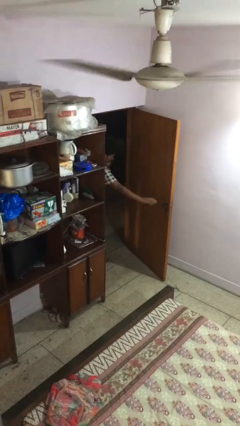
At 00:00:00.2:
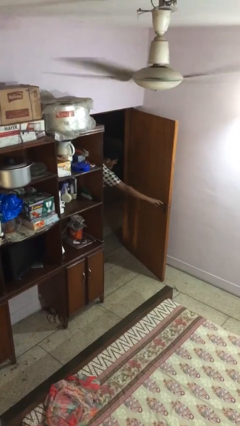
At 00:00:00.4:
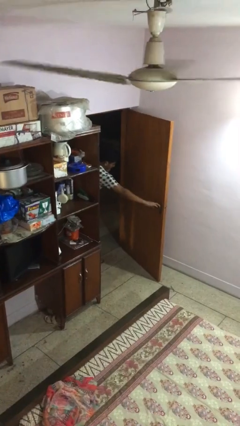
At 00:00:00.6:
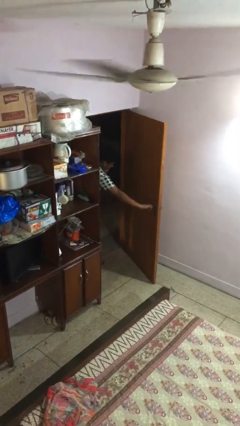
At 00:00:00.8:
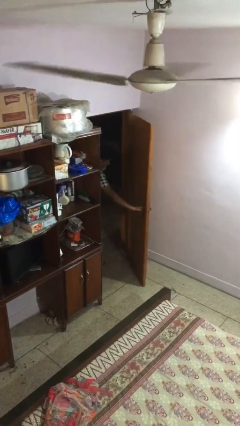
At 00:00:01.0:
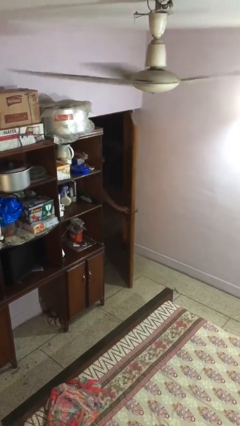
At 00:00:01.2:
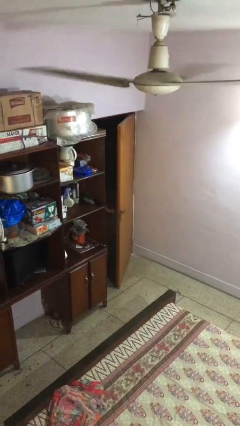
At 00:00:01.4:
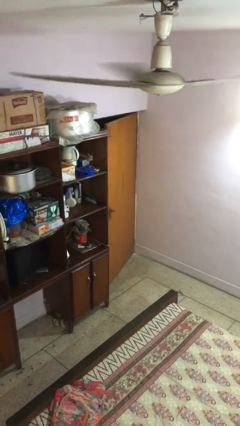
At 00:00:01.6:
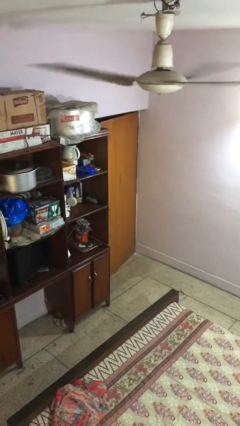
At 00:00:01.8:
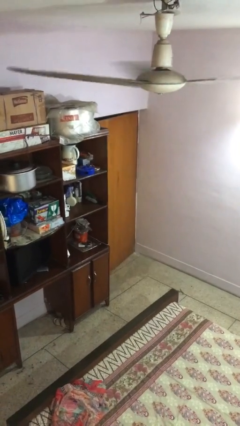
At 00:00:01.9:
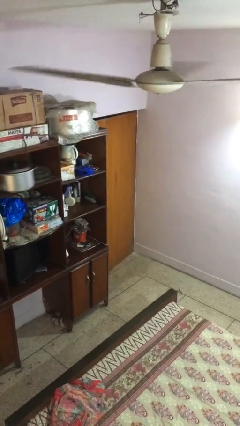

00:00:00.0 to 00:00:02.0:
person closes facility door

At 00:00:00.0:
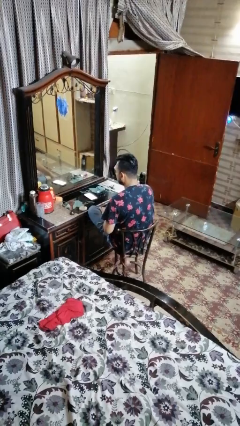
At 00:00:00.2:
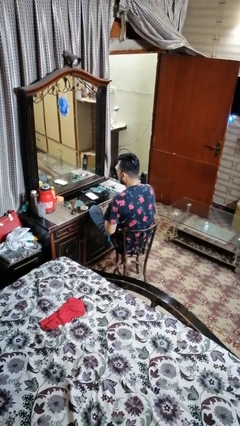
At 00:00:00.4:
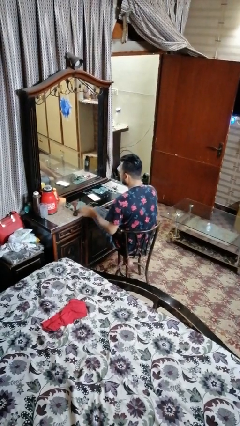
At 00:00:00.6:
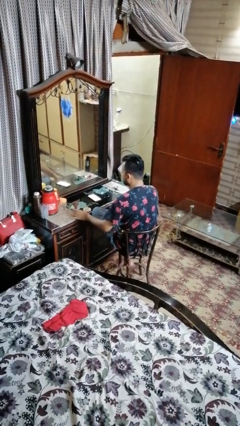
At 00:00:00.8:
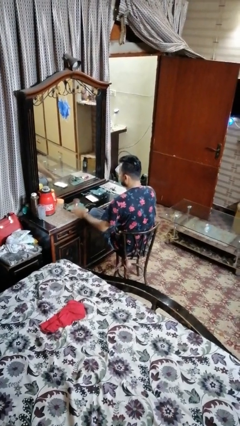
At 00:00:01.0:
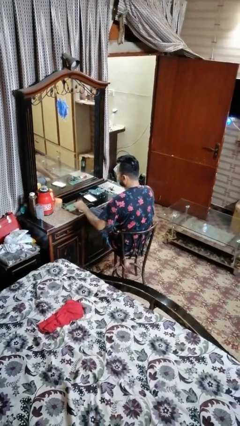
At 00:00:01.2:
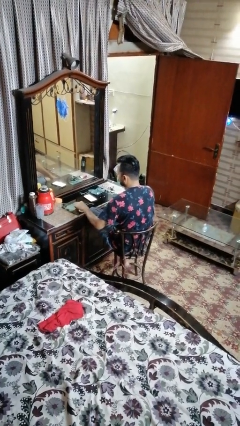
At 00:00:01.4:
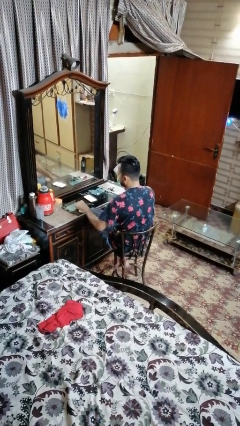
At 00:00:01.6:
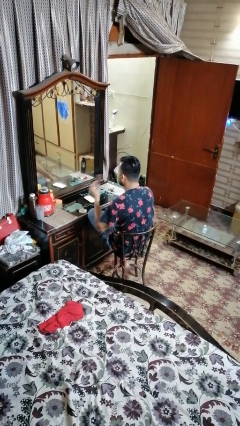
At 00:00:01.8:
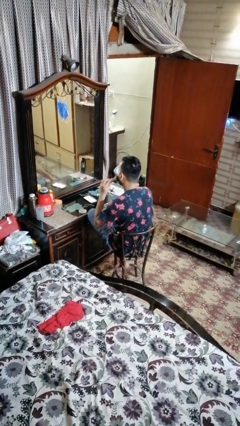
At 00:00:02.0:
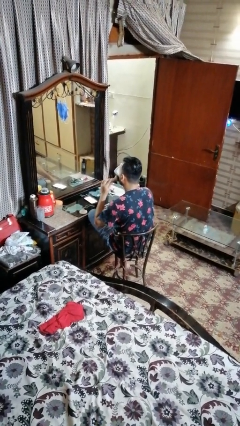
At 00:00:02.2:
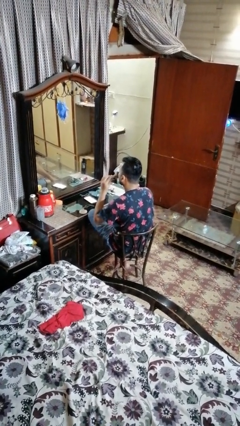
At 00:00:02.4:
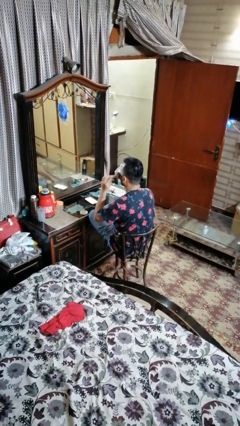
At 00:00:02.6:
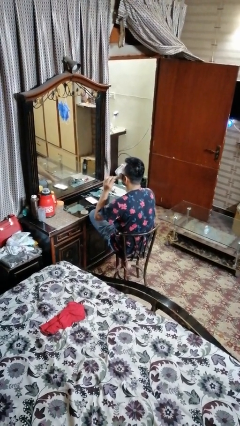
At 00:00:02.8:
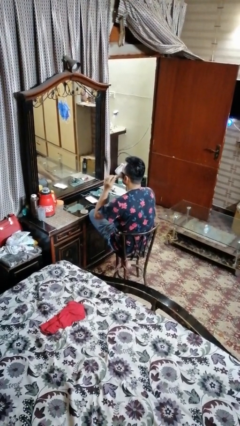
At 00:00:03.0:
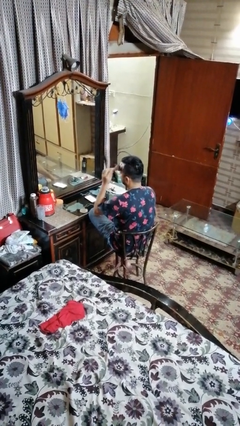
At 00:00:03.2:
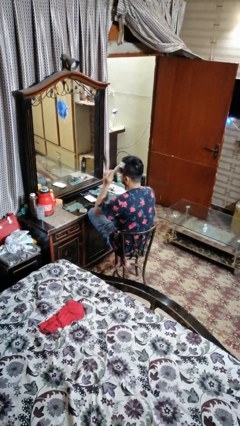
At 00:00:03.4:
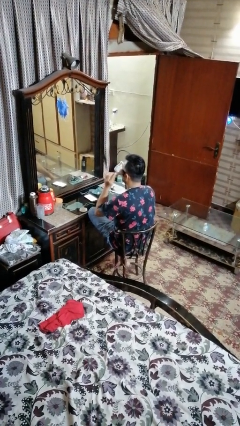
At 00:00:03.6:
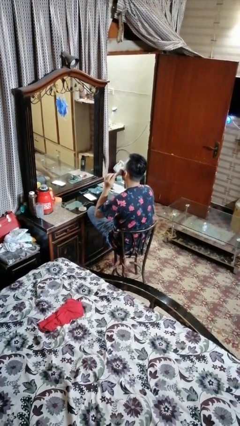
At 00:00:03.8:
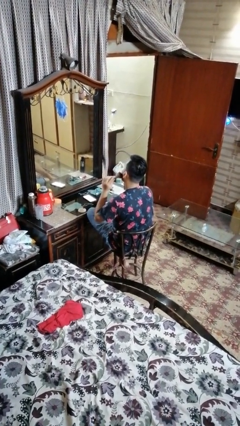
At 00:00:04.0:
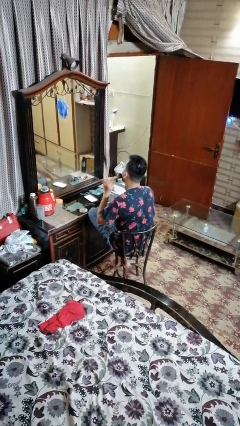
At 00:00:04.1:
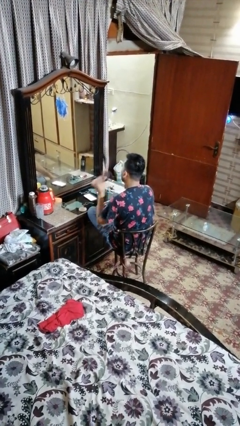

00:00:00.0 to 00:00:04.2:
person applies foundation makeup

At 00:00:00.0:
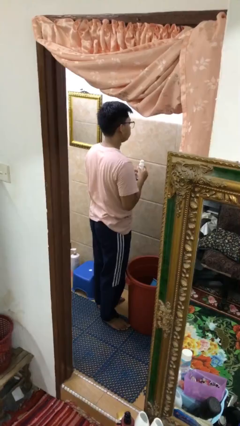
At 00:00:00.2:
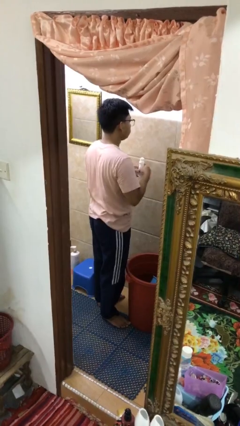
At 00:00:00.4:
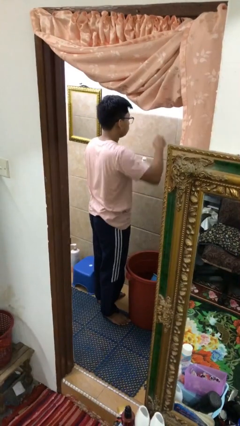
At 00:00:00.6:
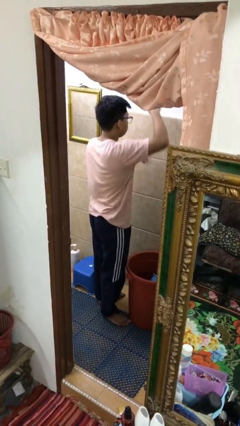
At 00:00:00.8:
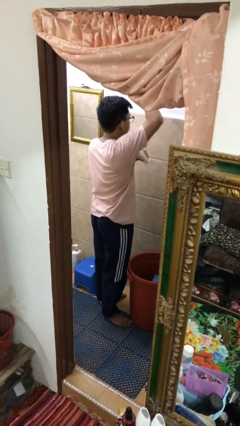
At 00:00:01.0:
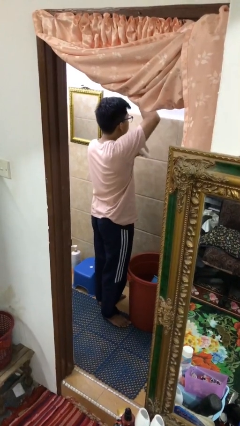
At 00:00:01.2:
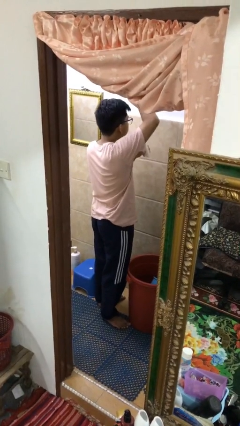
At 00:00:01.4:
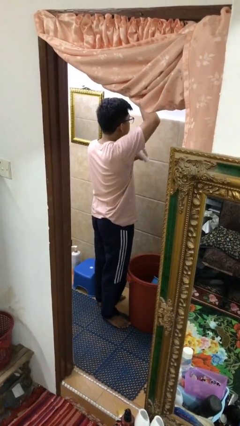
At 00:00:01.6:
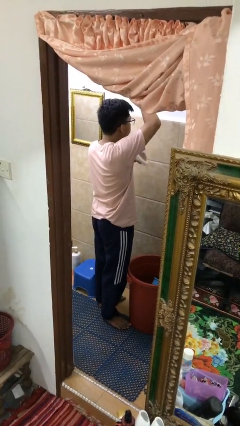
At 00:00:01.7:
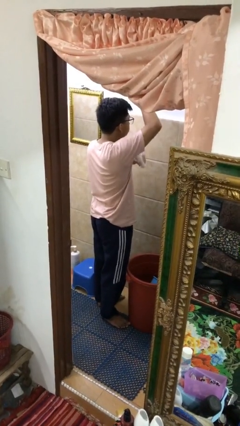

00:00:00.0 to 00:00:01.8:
person applies deodorant

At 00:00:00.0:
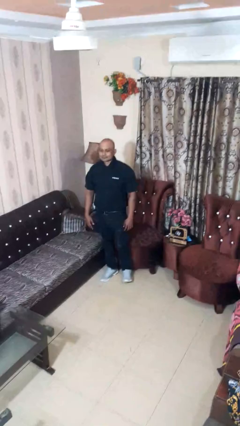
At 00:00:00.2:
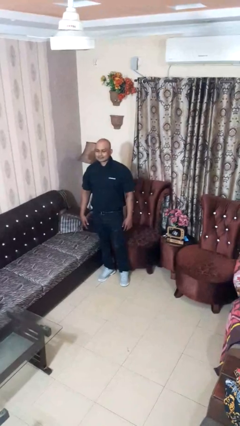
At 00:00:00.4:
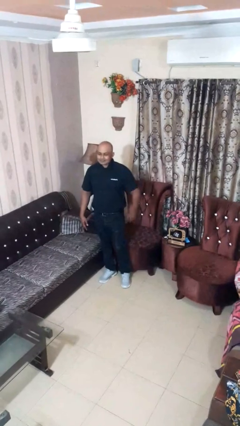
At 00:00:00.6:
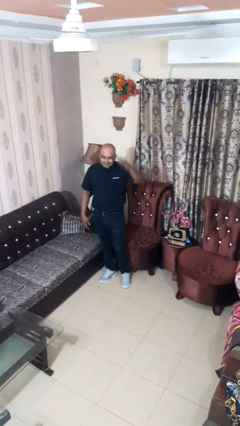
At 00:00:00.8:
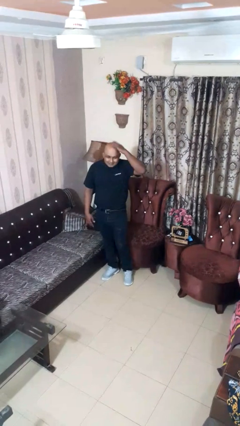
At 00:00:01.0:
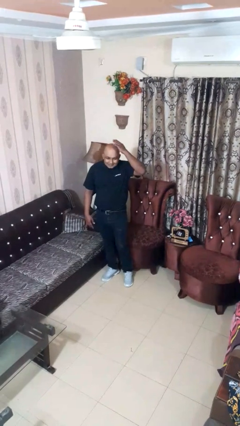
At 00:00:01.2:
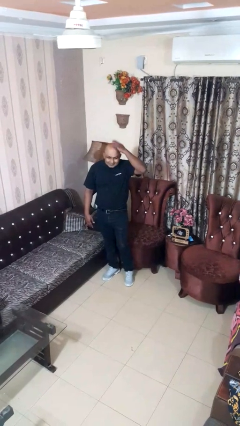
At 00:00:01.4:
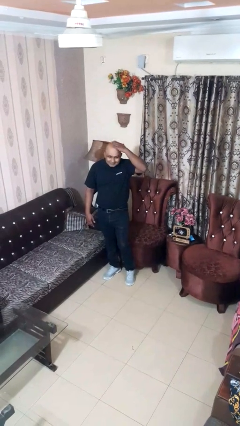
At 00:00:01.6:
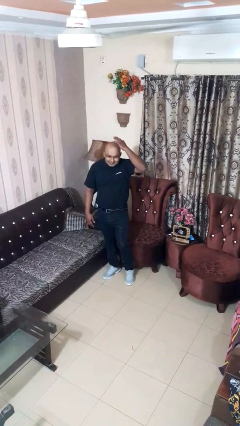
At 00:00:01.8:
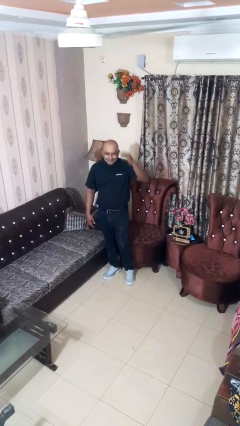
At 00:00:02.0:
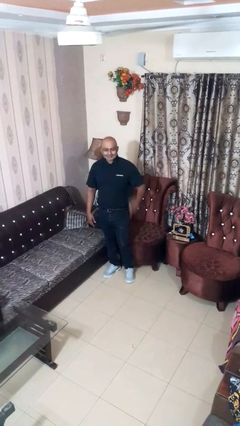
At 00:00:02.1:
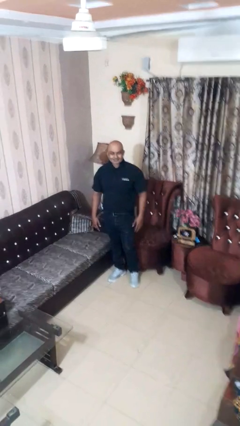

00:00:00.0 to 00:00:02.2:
person pats head

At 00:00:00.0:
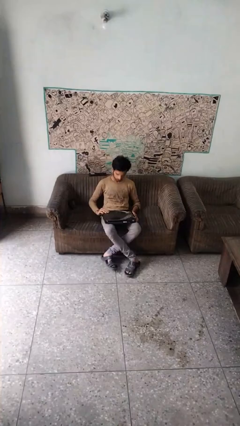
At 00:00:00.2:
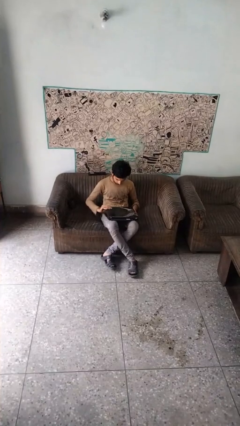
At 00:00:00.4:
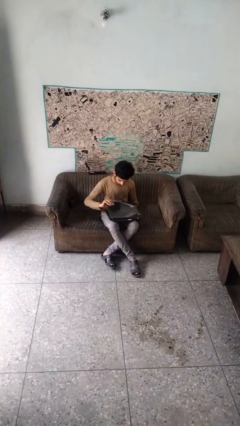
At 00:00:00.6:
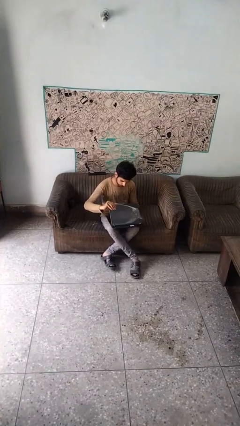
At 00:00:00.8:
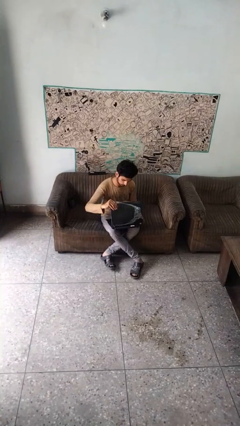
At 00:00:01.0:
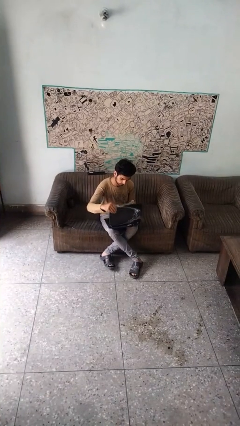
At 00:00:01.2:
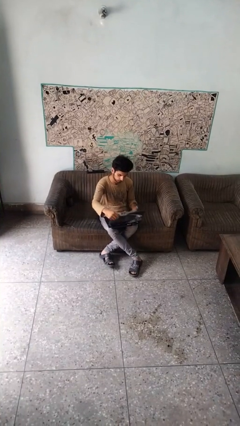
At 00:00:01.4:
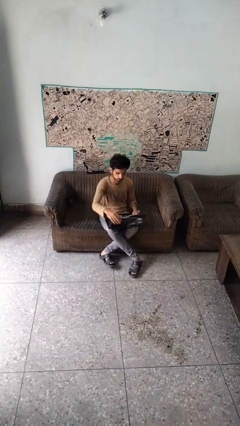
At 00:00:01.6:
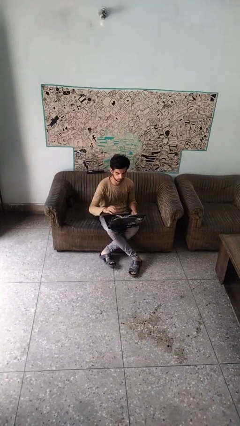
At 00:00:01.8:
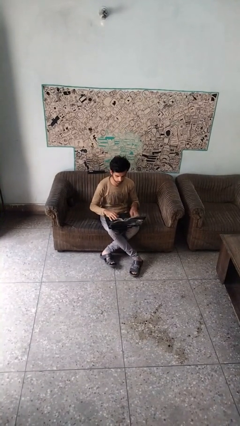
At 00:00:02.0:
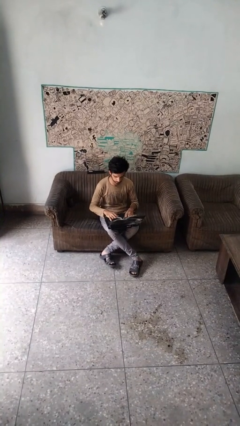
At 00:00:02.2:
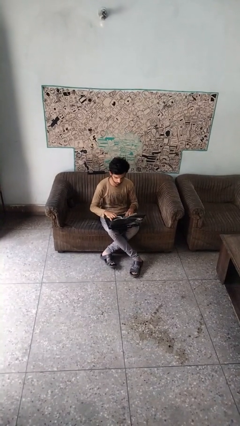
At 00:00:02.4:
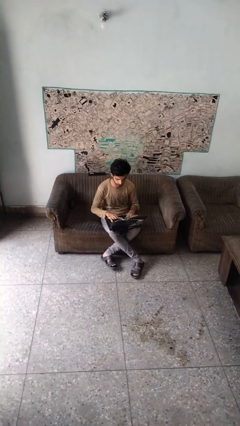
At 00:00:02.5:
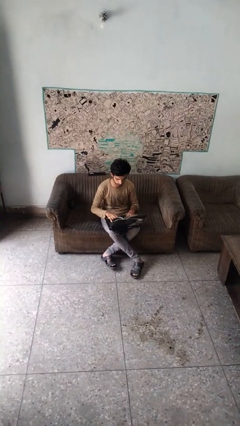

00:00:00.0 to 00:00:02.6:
person opens laptop

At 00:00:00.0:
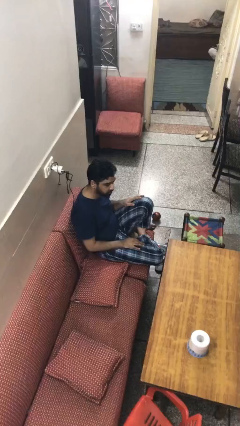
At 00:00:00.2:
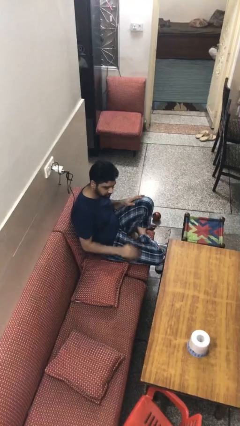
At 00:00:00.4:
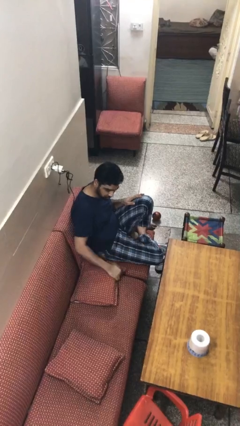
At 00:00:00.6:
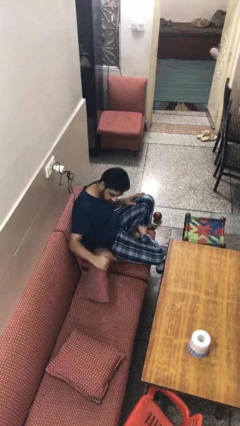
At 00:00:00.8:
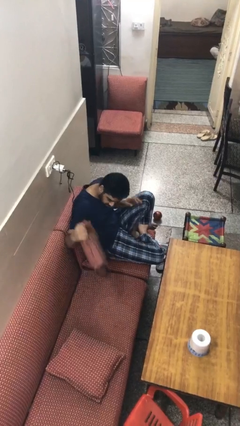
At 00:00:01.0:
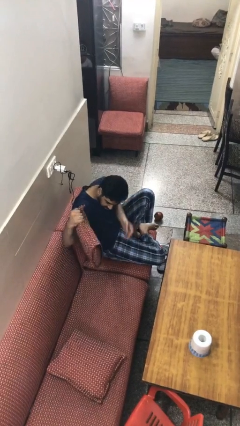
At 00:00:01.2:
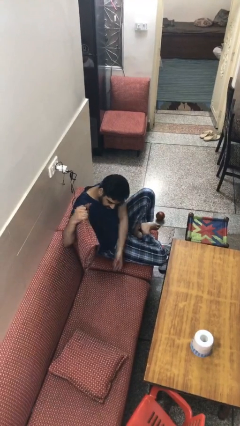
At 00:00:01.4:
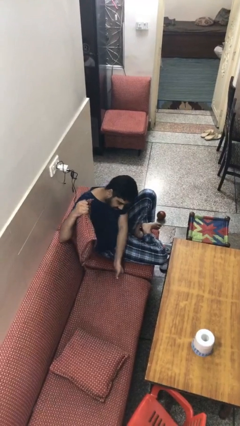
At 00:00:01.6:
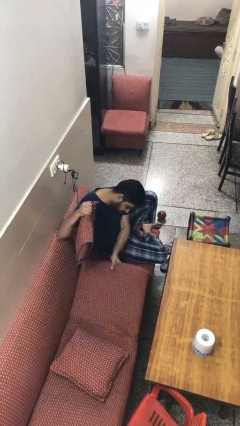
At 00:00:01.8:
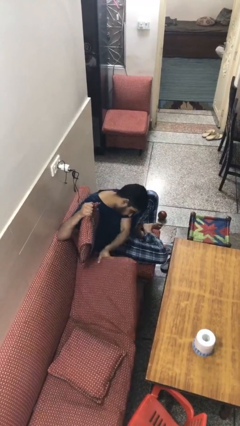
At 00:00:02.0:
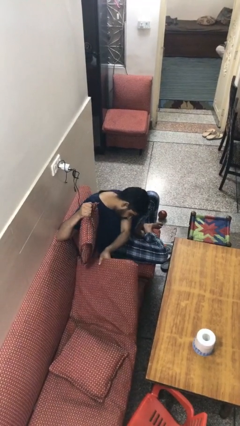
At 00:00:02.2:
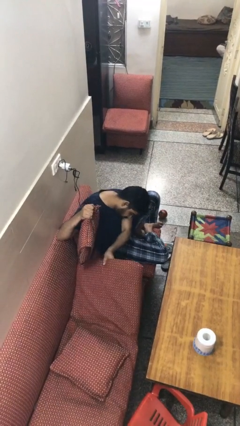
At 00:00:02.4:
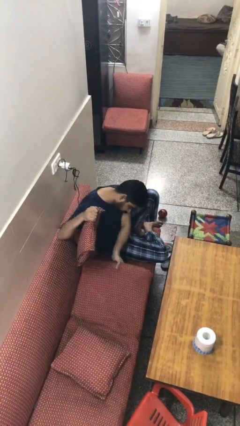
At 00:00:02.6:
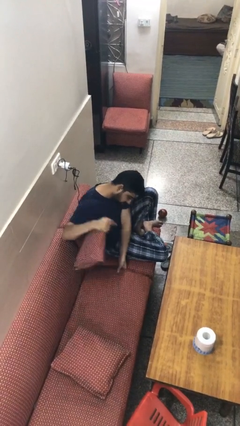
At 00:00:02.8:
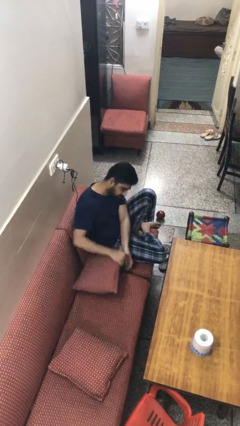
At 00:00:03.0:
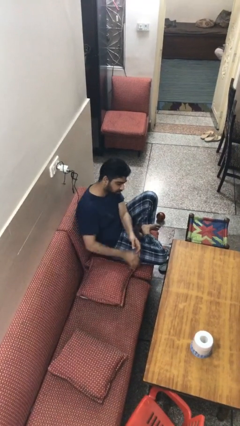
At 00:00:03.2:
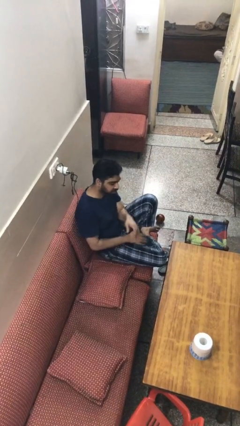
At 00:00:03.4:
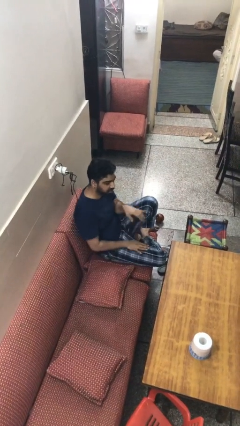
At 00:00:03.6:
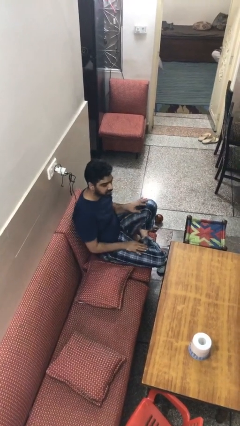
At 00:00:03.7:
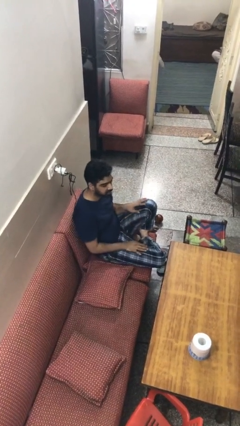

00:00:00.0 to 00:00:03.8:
person searches under couch

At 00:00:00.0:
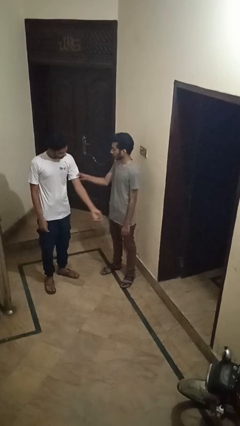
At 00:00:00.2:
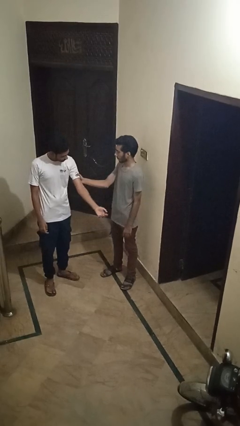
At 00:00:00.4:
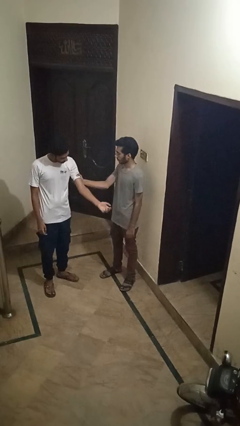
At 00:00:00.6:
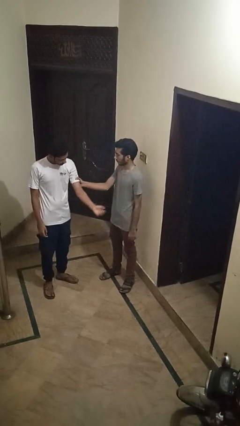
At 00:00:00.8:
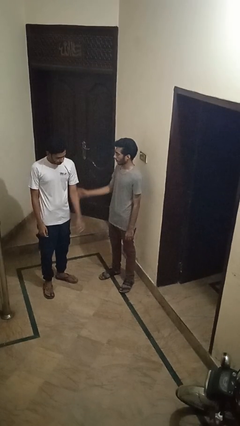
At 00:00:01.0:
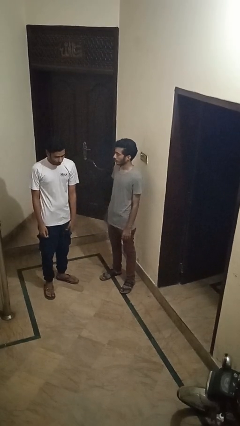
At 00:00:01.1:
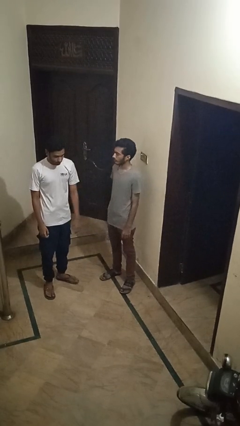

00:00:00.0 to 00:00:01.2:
person grabs person by bicep
